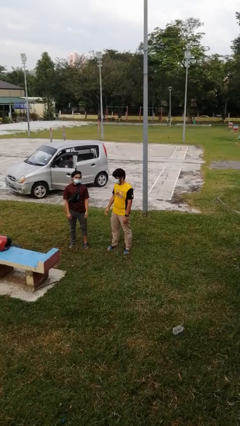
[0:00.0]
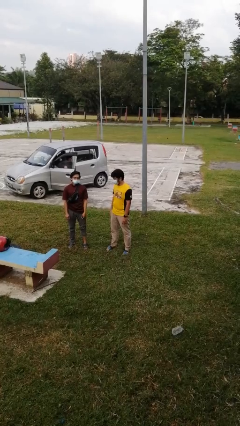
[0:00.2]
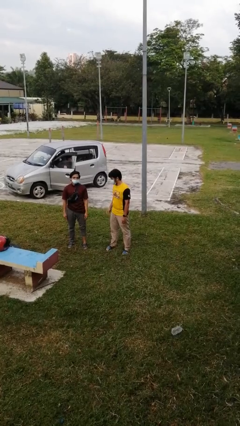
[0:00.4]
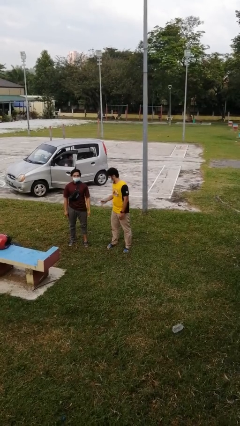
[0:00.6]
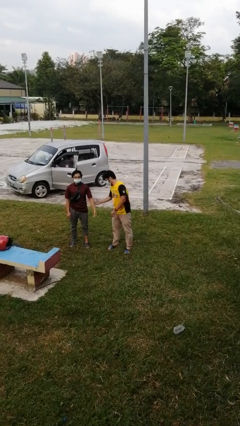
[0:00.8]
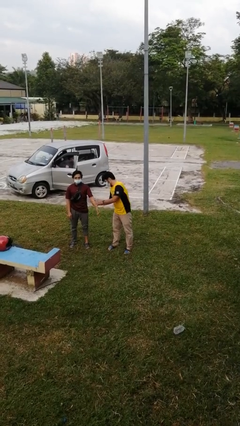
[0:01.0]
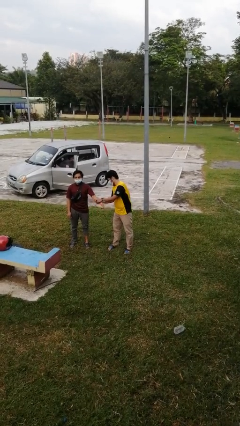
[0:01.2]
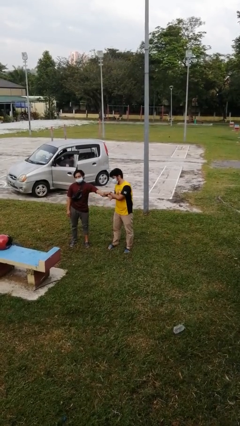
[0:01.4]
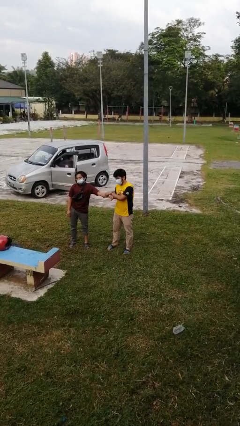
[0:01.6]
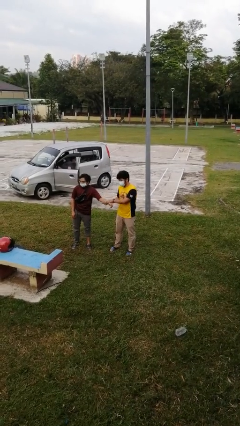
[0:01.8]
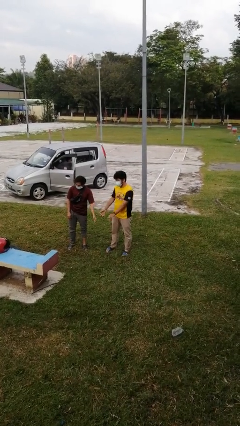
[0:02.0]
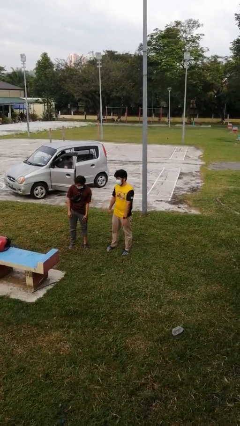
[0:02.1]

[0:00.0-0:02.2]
person grabs person by forearm

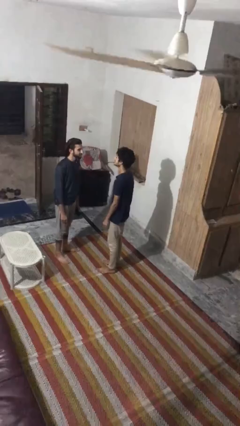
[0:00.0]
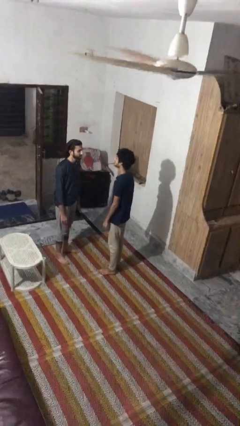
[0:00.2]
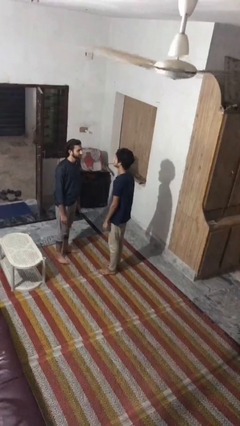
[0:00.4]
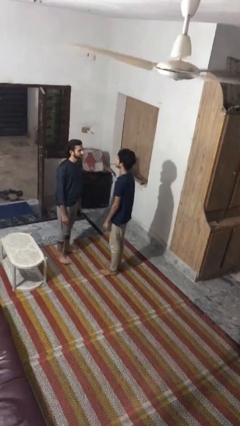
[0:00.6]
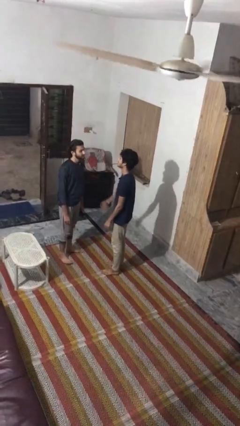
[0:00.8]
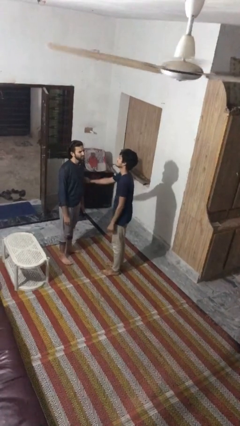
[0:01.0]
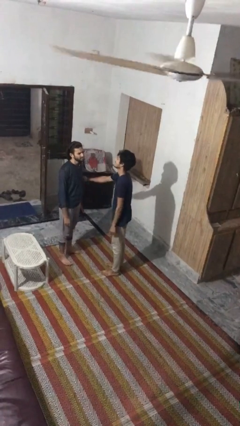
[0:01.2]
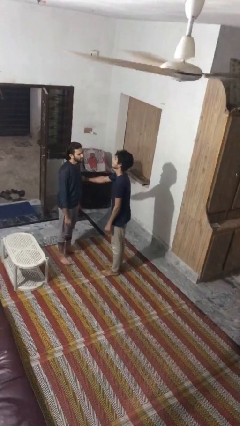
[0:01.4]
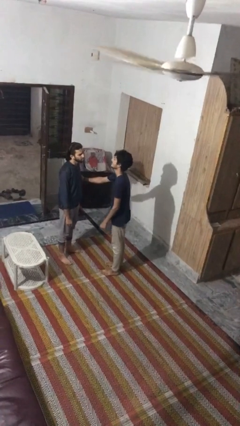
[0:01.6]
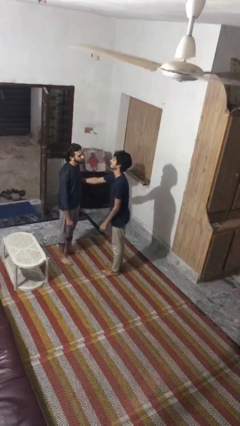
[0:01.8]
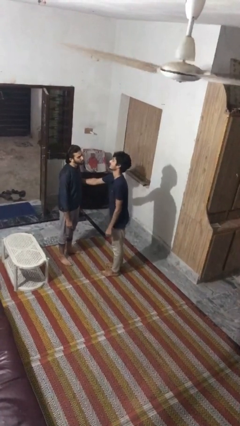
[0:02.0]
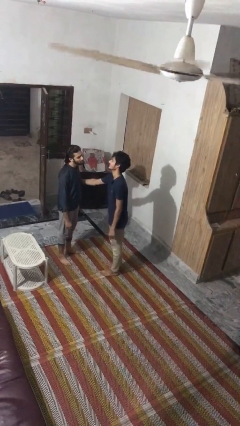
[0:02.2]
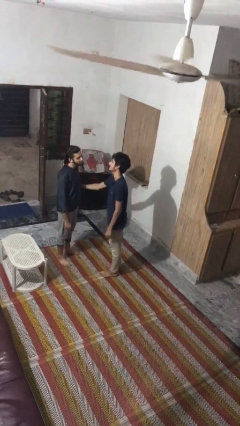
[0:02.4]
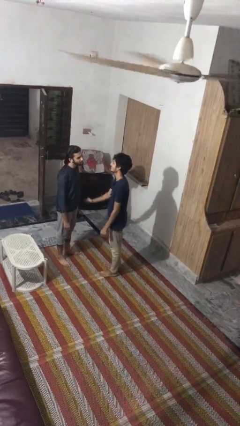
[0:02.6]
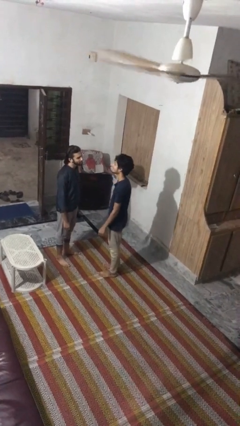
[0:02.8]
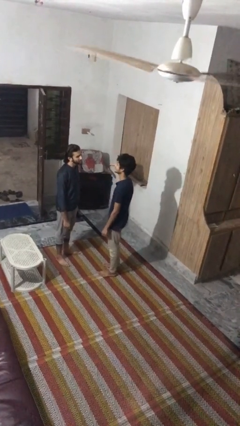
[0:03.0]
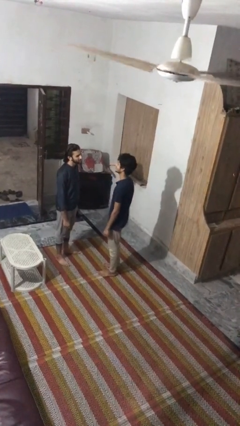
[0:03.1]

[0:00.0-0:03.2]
person grabs person by bicep

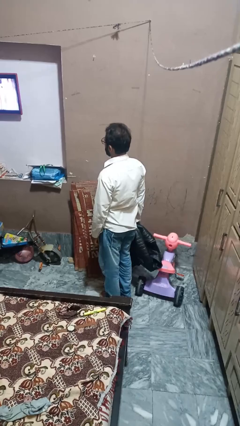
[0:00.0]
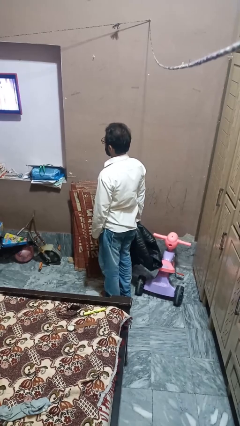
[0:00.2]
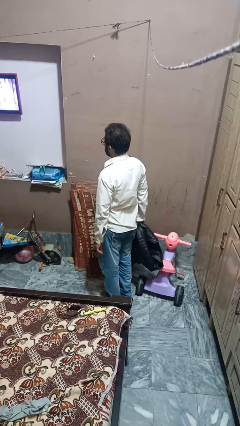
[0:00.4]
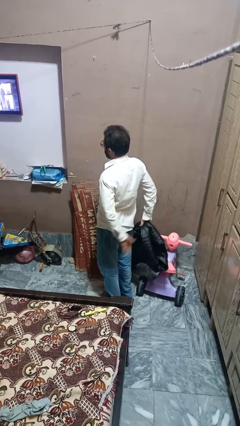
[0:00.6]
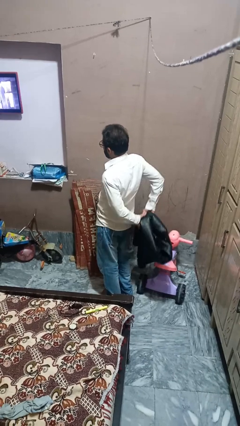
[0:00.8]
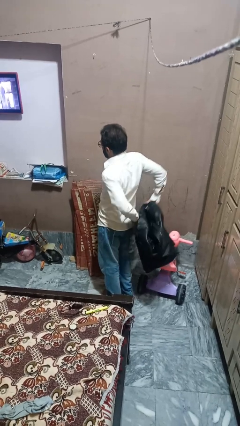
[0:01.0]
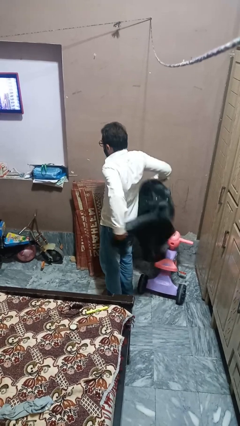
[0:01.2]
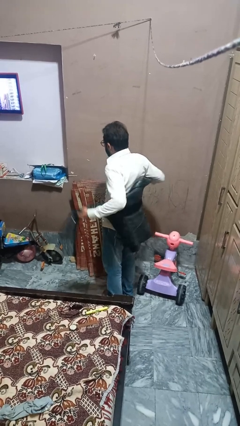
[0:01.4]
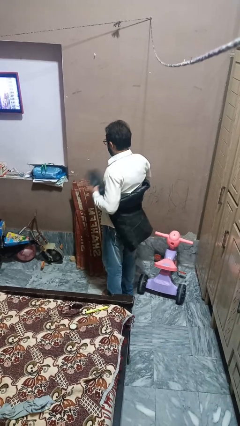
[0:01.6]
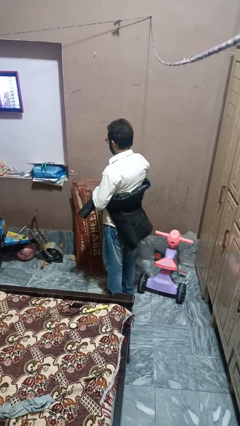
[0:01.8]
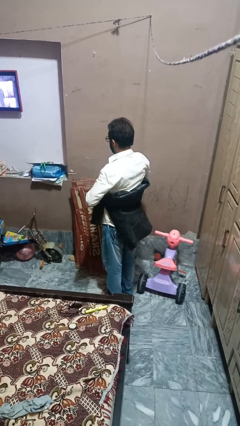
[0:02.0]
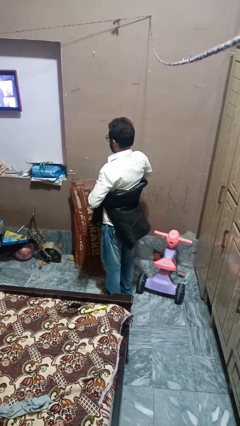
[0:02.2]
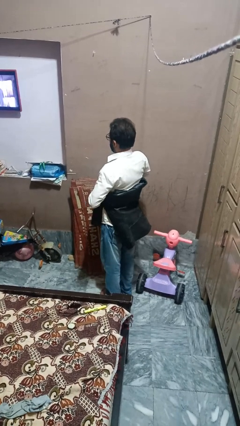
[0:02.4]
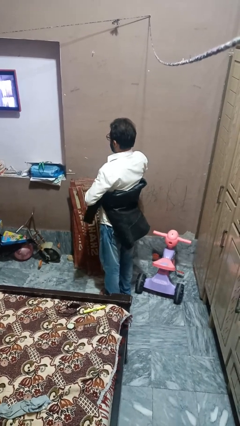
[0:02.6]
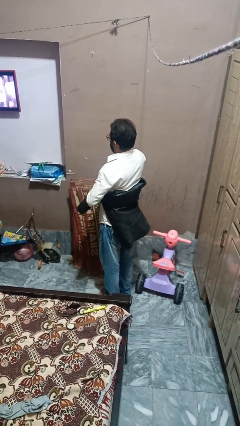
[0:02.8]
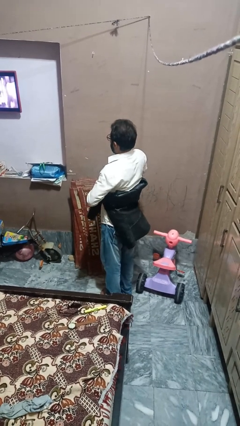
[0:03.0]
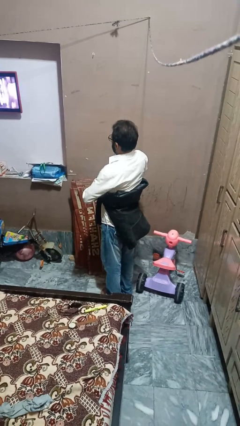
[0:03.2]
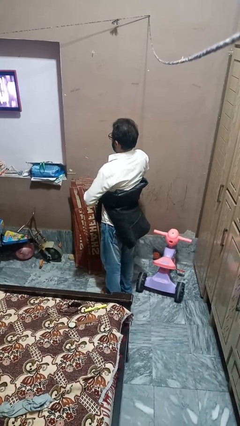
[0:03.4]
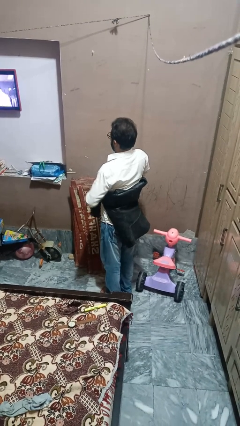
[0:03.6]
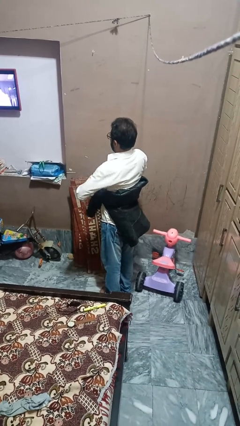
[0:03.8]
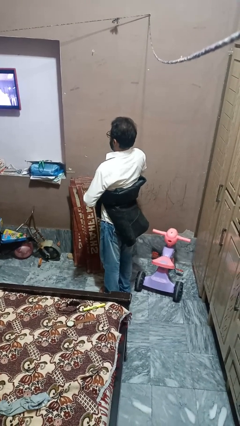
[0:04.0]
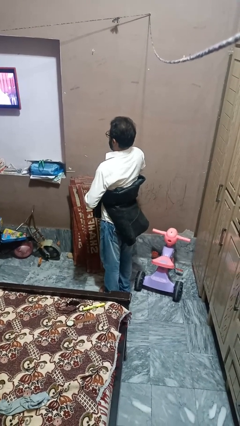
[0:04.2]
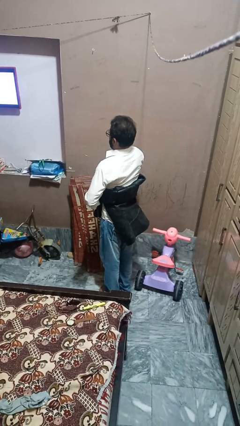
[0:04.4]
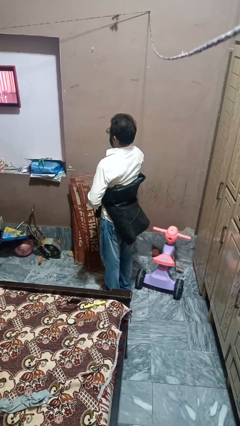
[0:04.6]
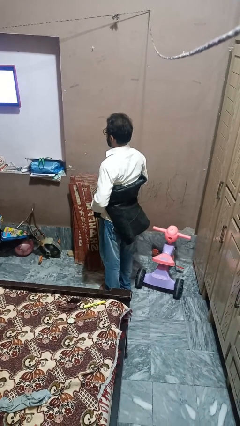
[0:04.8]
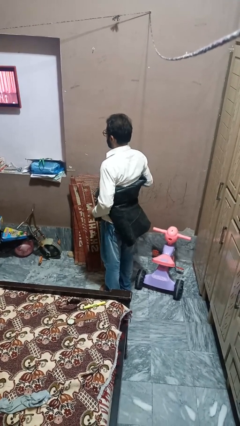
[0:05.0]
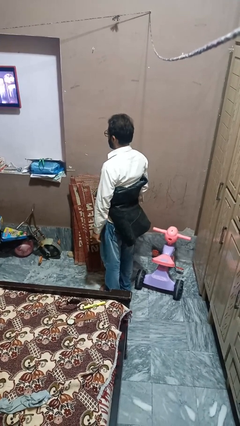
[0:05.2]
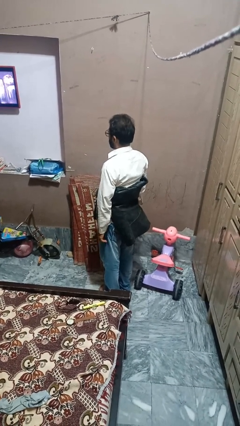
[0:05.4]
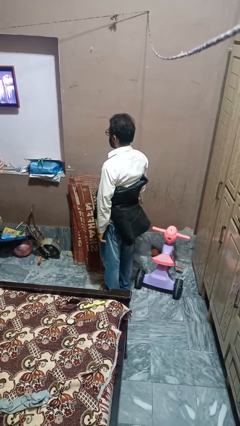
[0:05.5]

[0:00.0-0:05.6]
person ties jacket around waist

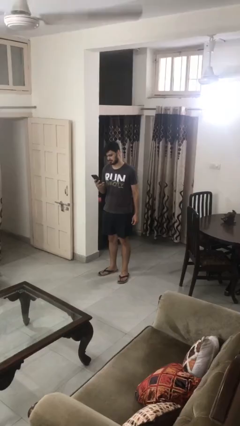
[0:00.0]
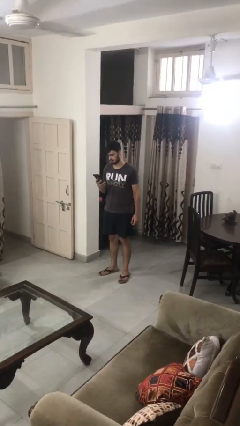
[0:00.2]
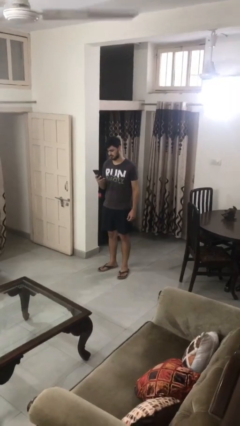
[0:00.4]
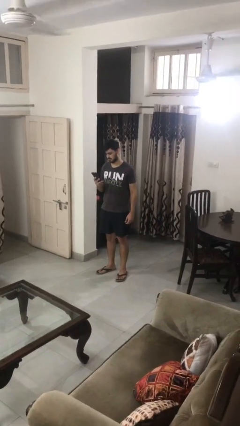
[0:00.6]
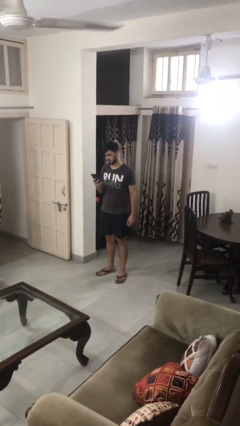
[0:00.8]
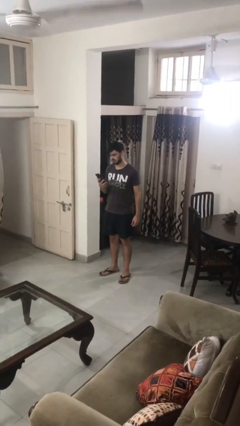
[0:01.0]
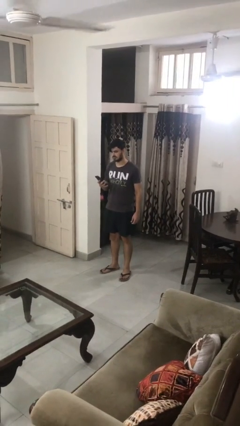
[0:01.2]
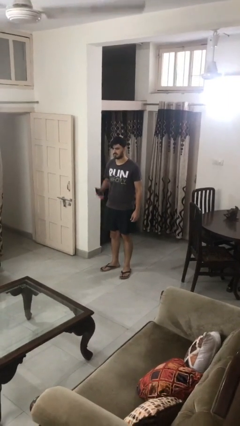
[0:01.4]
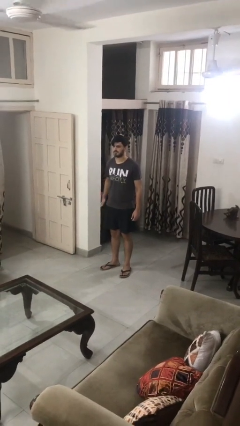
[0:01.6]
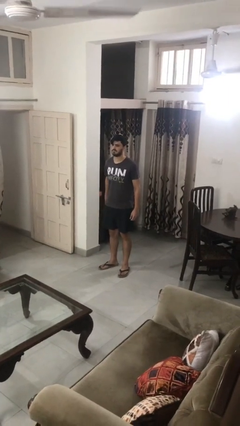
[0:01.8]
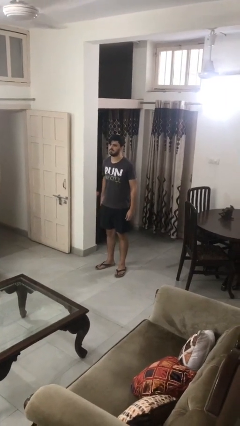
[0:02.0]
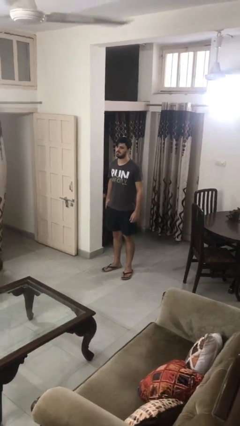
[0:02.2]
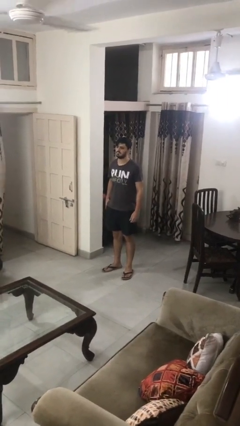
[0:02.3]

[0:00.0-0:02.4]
person puts phone into pocket

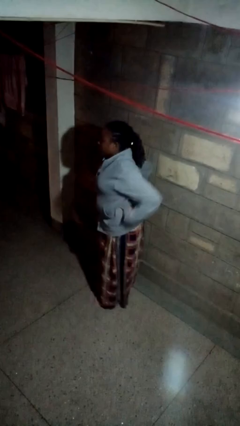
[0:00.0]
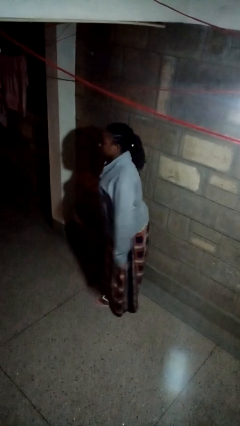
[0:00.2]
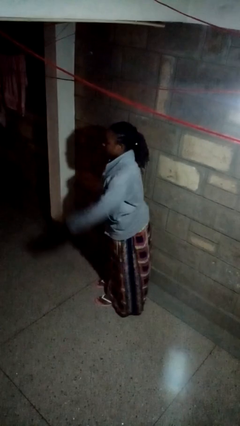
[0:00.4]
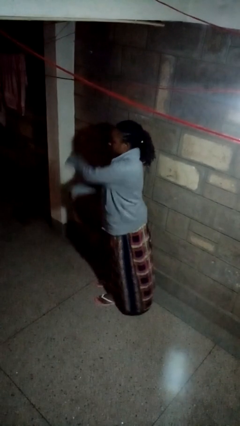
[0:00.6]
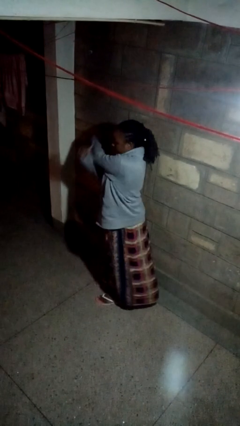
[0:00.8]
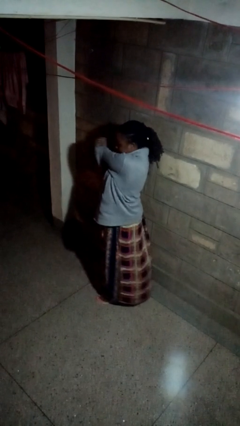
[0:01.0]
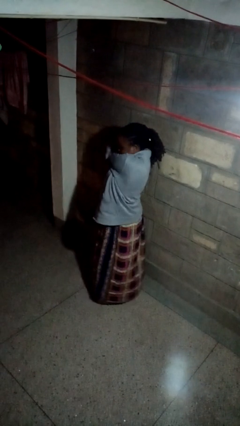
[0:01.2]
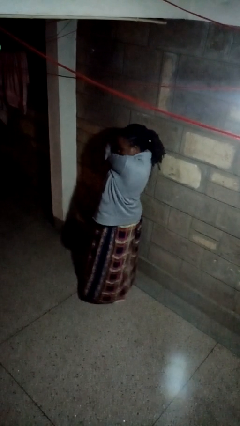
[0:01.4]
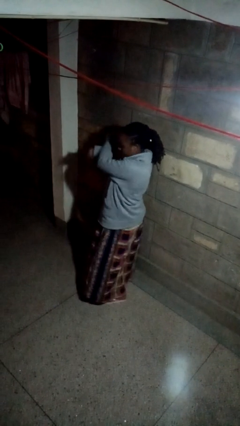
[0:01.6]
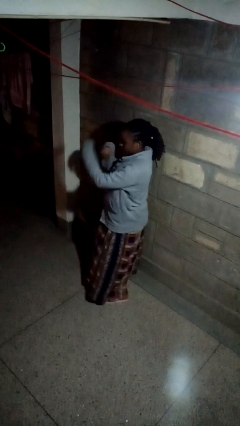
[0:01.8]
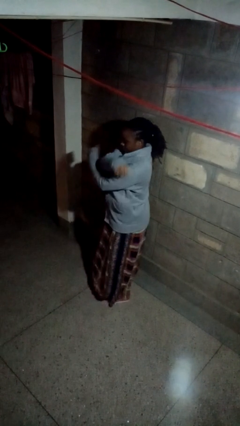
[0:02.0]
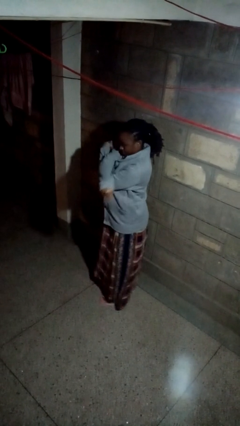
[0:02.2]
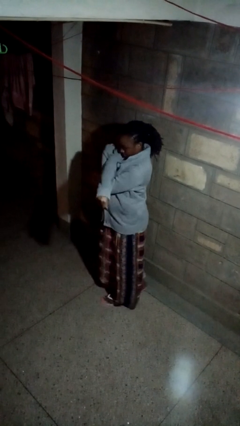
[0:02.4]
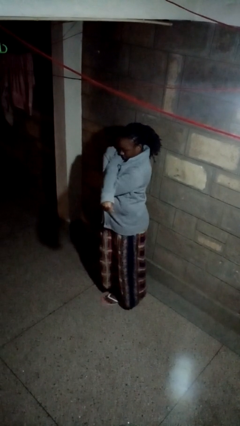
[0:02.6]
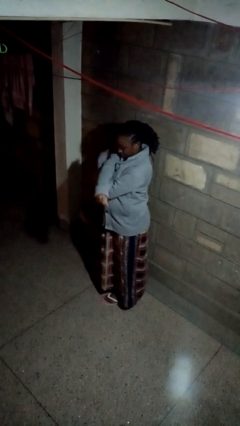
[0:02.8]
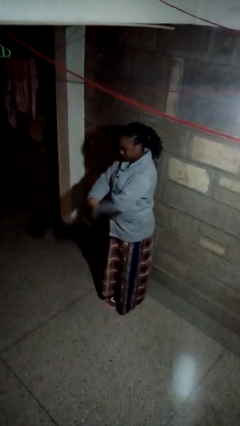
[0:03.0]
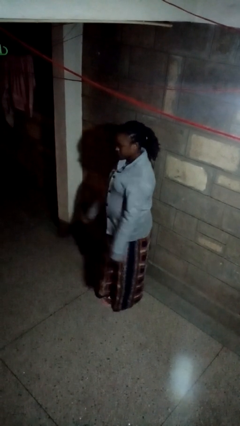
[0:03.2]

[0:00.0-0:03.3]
person stretches arms to side

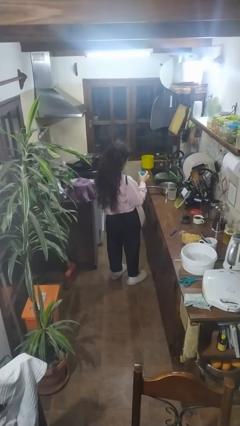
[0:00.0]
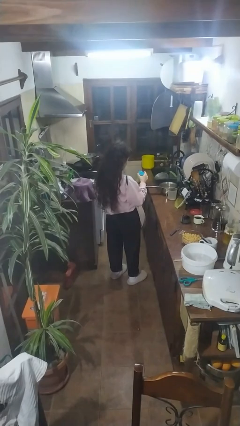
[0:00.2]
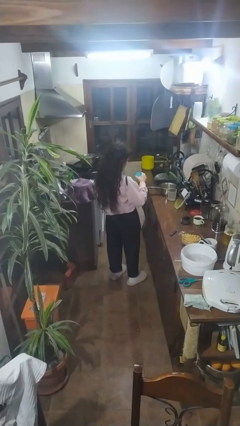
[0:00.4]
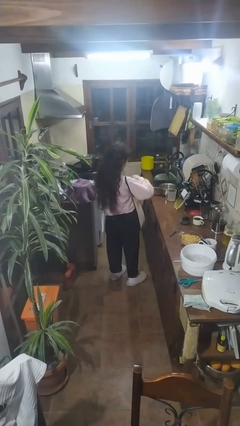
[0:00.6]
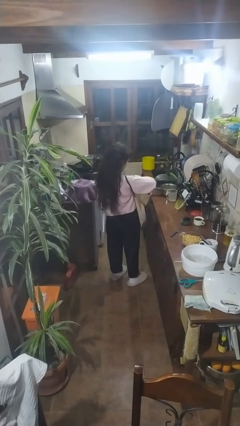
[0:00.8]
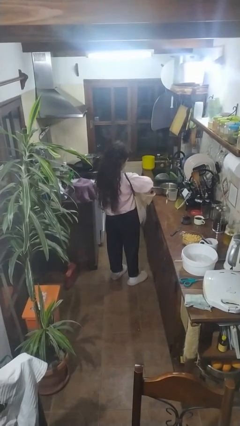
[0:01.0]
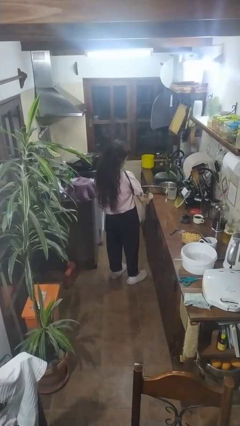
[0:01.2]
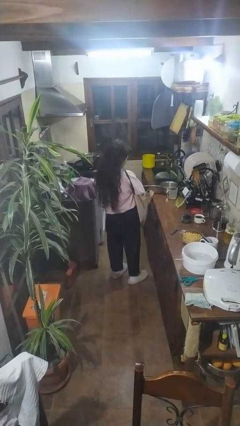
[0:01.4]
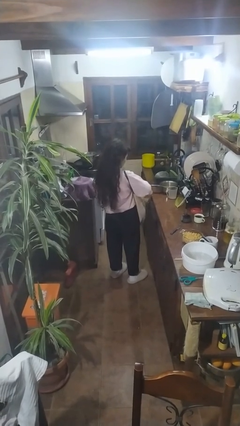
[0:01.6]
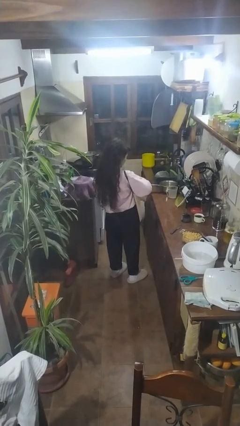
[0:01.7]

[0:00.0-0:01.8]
person puts object into bag
